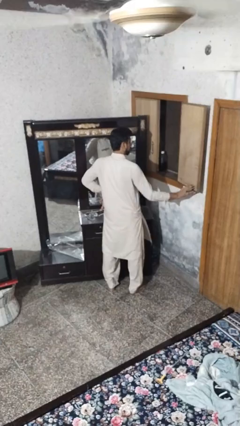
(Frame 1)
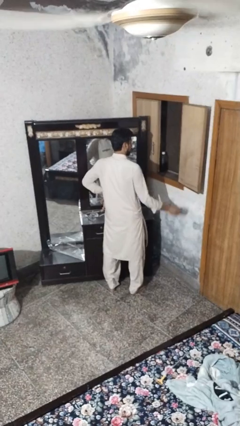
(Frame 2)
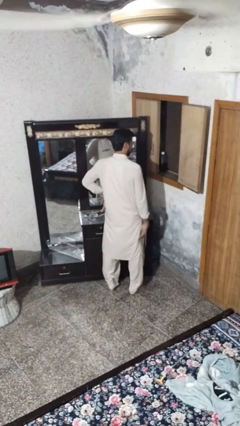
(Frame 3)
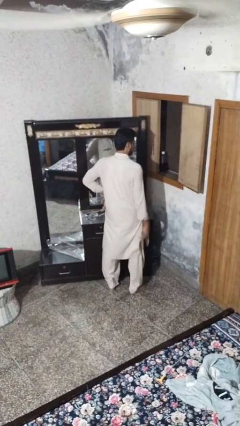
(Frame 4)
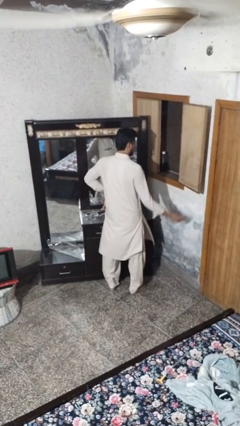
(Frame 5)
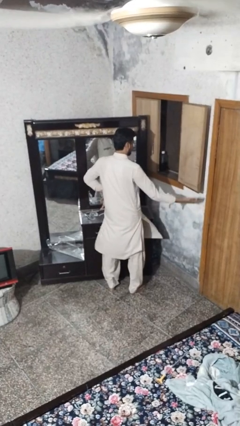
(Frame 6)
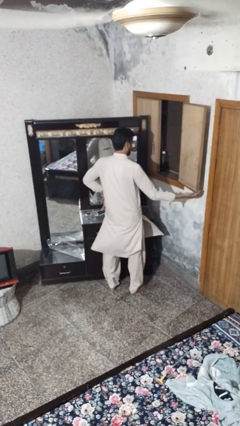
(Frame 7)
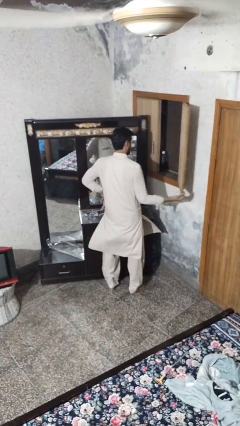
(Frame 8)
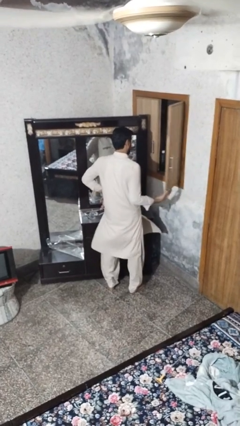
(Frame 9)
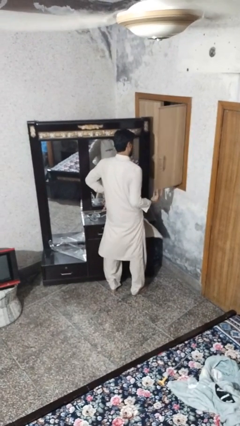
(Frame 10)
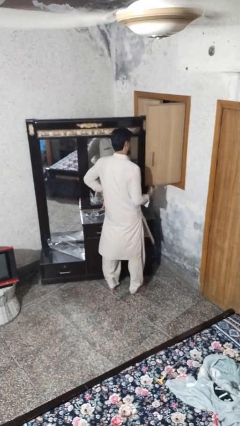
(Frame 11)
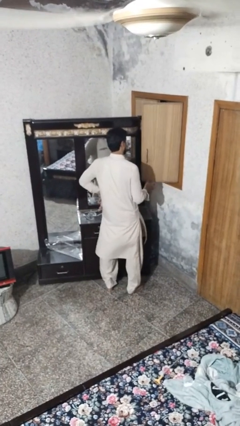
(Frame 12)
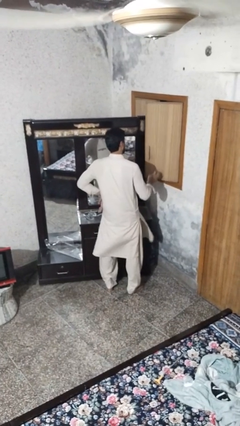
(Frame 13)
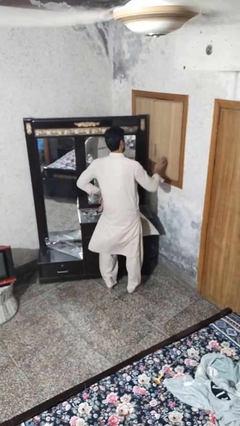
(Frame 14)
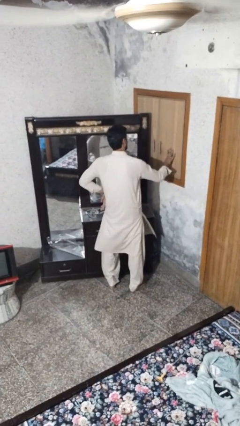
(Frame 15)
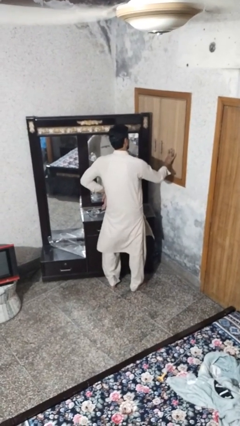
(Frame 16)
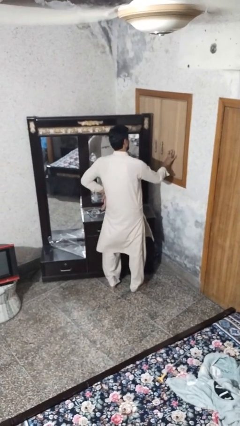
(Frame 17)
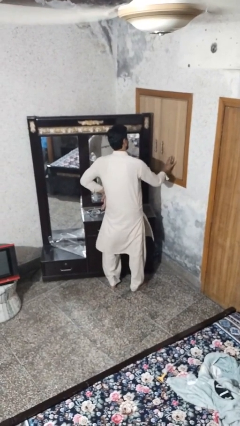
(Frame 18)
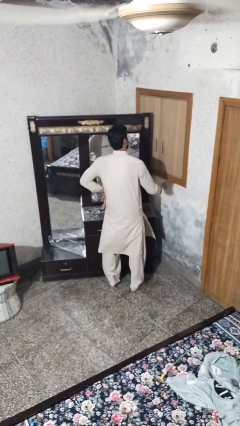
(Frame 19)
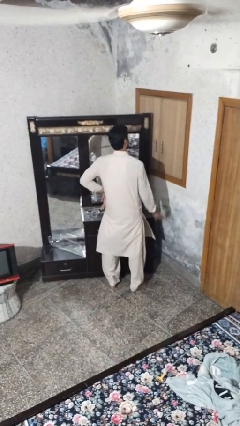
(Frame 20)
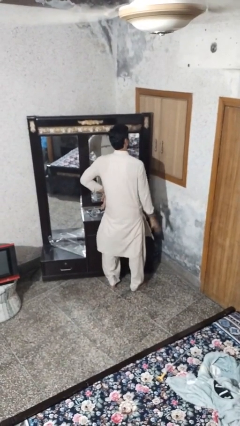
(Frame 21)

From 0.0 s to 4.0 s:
person closes home window

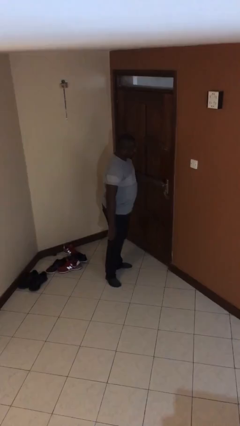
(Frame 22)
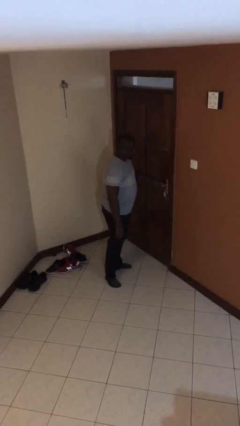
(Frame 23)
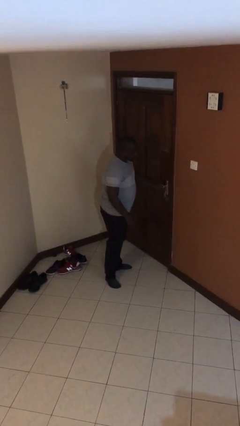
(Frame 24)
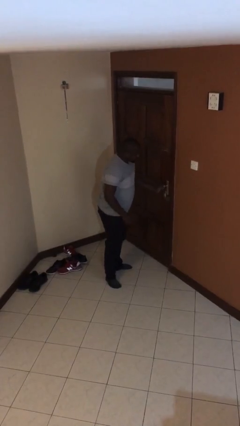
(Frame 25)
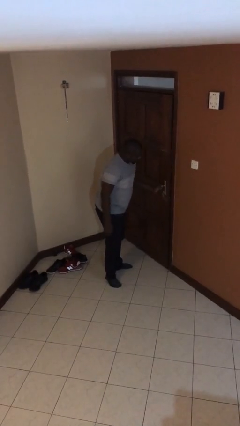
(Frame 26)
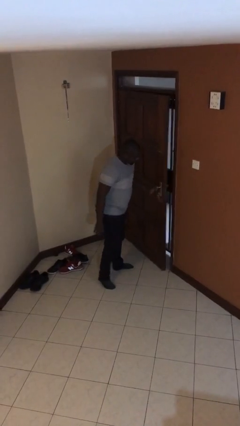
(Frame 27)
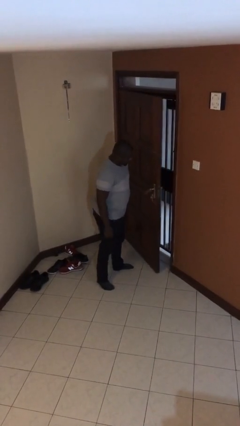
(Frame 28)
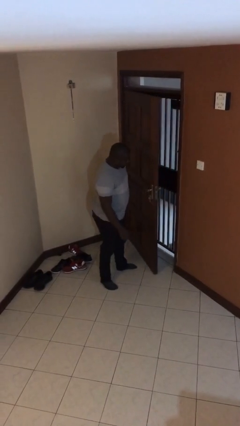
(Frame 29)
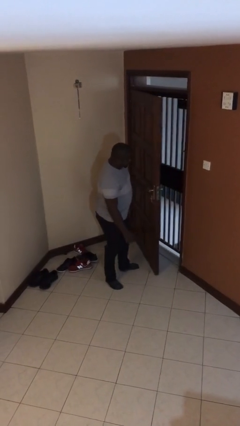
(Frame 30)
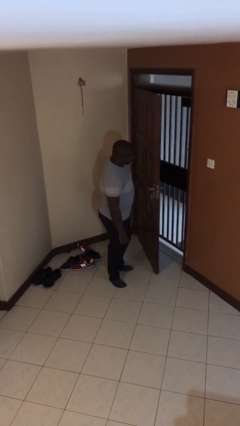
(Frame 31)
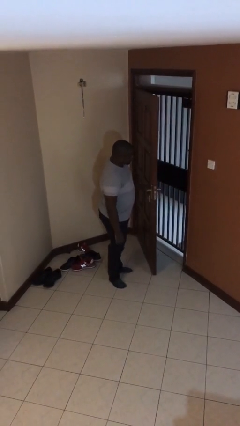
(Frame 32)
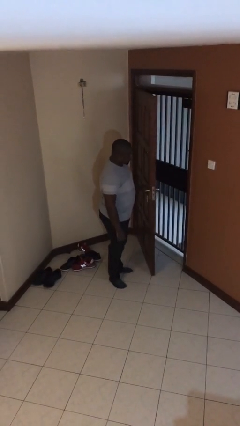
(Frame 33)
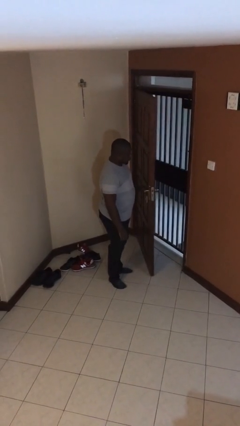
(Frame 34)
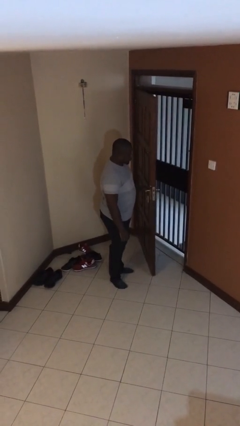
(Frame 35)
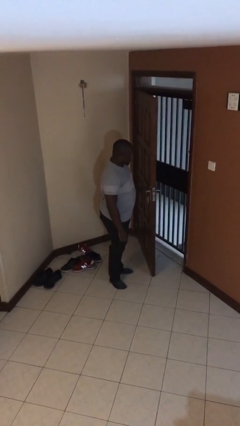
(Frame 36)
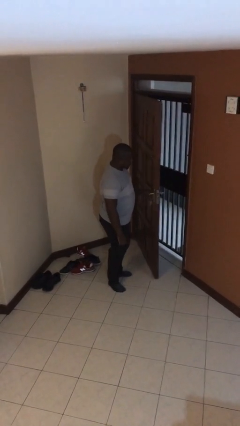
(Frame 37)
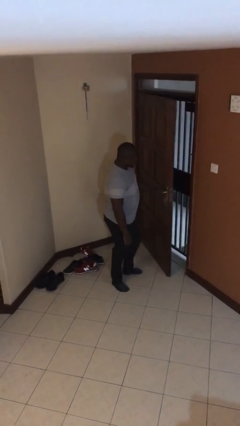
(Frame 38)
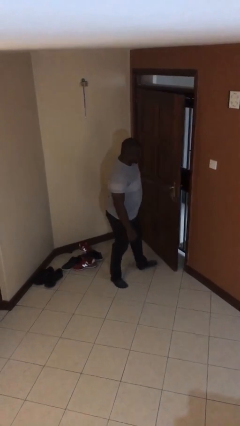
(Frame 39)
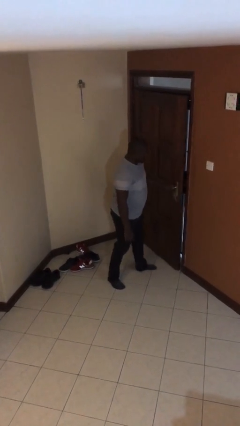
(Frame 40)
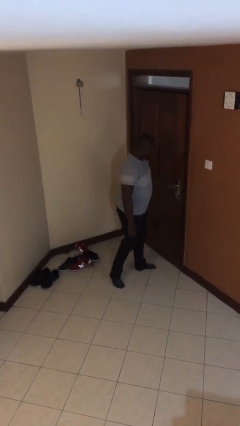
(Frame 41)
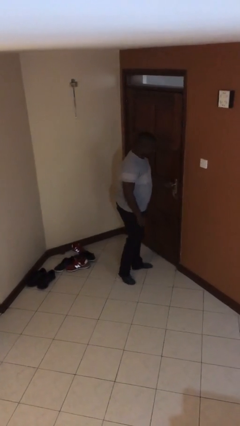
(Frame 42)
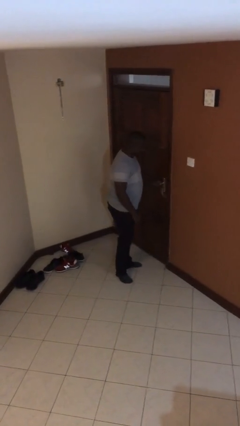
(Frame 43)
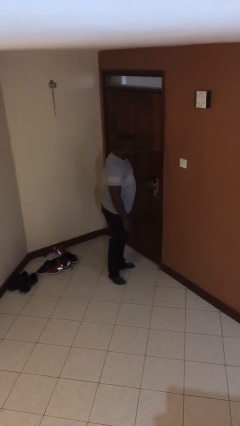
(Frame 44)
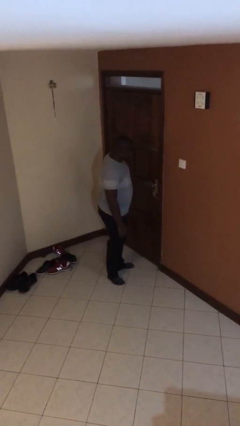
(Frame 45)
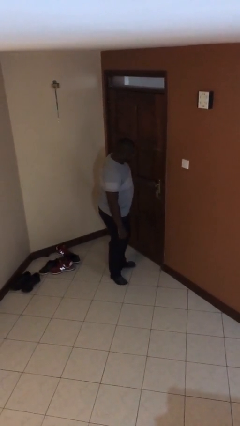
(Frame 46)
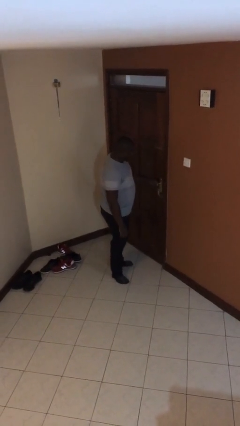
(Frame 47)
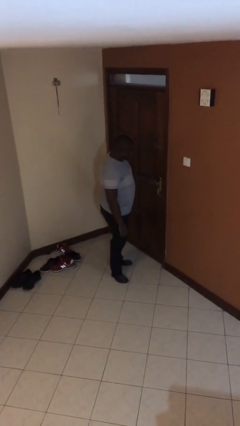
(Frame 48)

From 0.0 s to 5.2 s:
person opens facility door

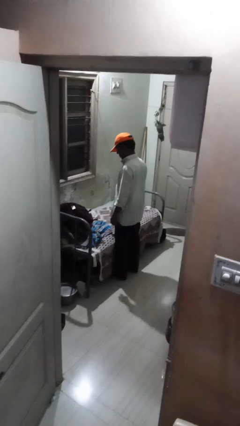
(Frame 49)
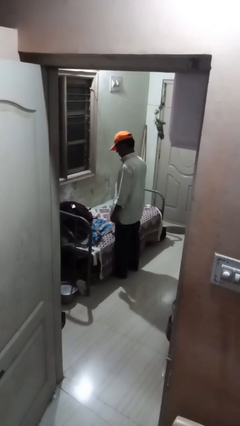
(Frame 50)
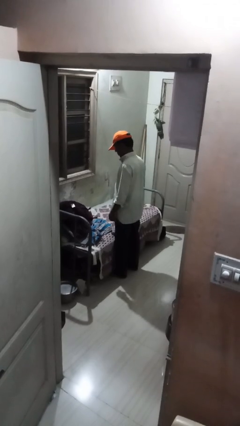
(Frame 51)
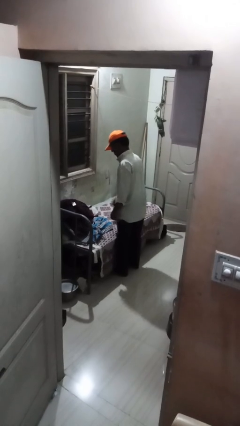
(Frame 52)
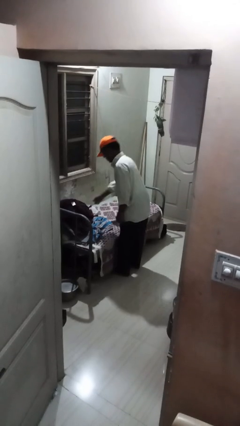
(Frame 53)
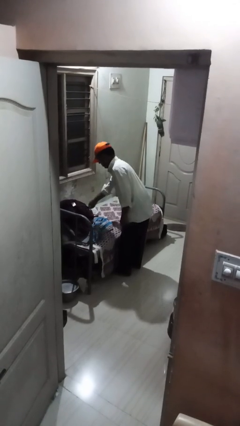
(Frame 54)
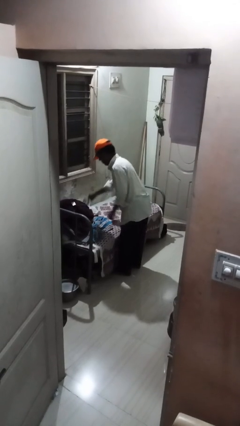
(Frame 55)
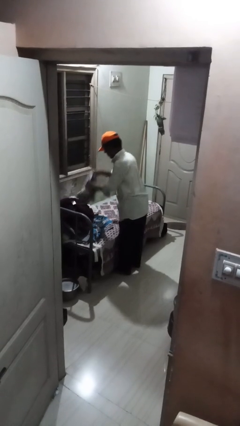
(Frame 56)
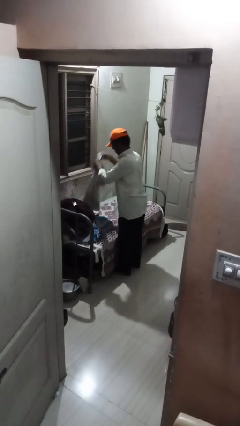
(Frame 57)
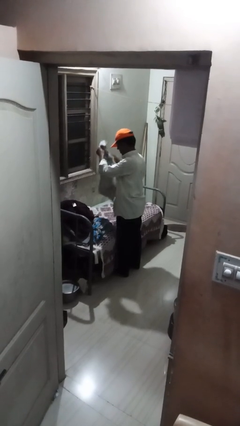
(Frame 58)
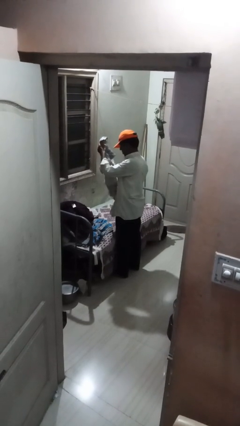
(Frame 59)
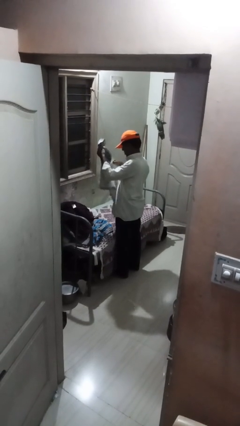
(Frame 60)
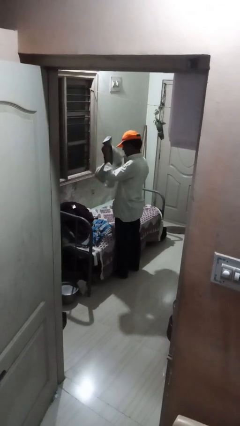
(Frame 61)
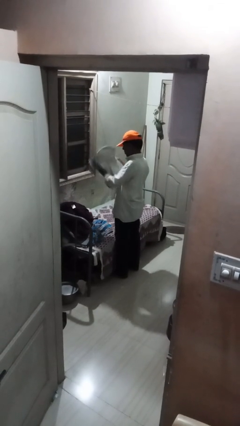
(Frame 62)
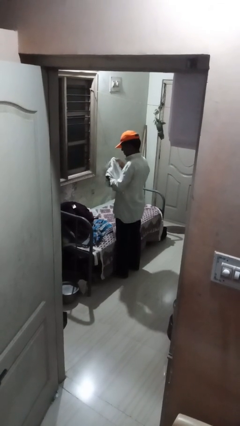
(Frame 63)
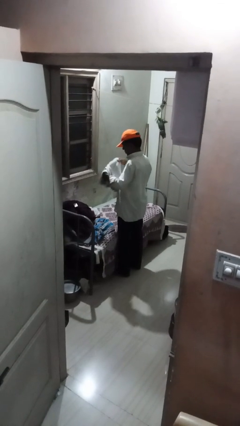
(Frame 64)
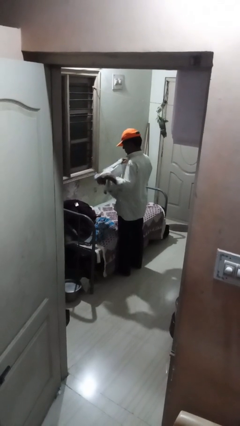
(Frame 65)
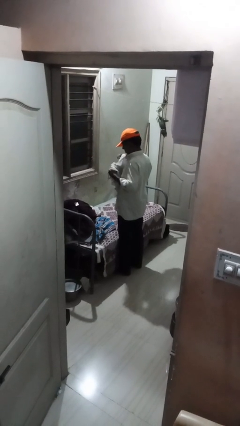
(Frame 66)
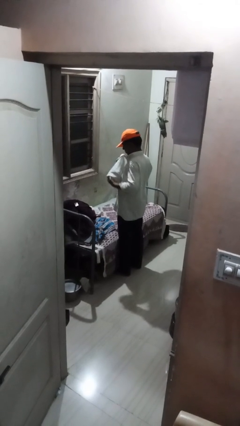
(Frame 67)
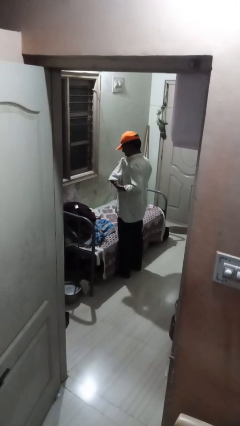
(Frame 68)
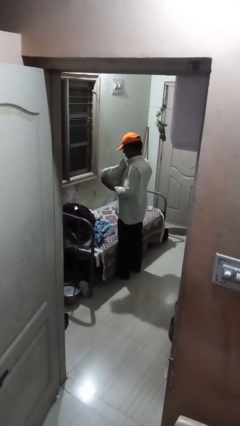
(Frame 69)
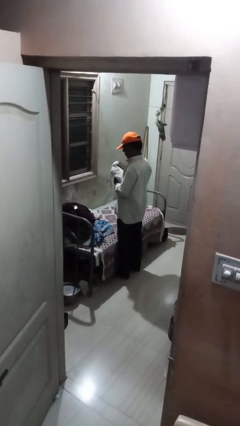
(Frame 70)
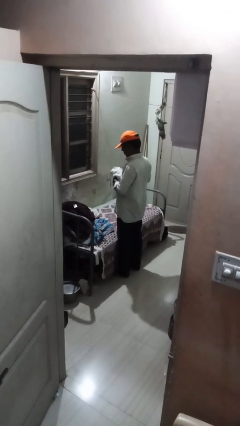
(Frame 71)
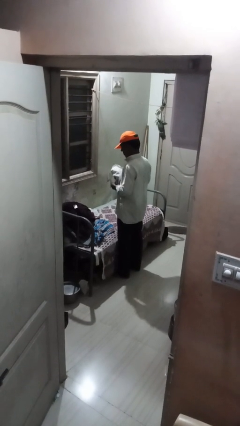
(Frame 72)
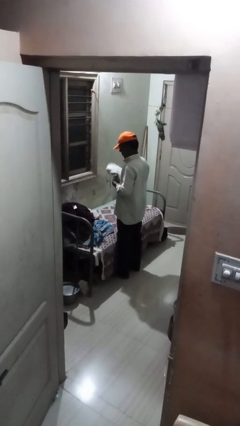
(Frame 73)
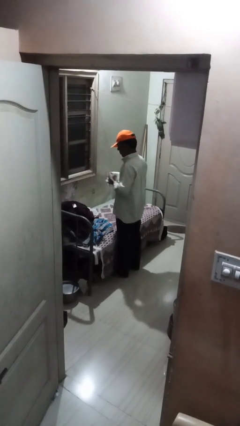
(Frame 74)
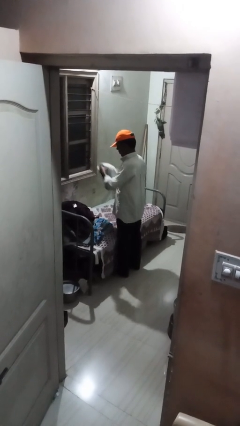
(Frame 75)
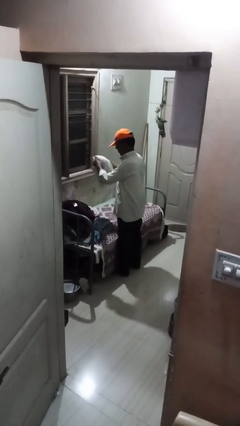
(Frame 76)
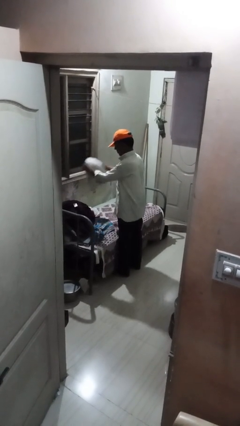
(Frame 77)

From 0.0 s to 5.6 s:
person folds shirt

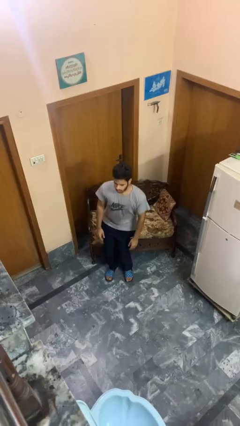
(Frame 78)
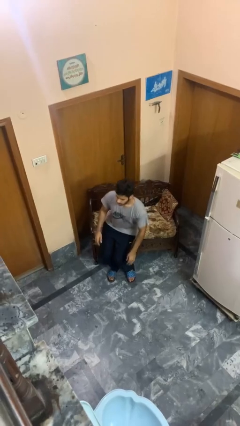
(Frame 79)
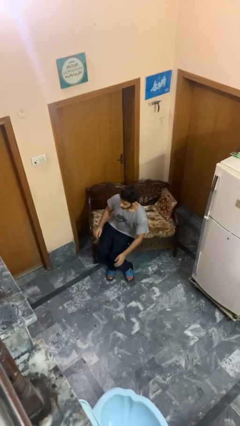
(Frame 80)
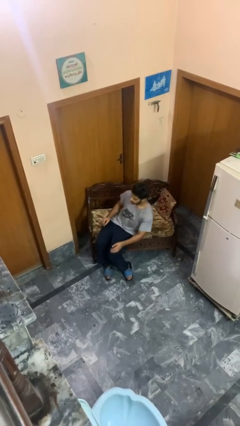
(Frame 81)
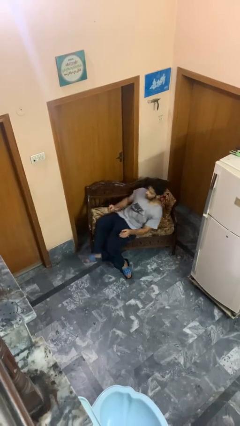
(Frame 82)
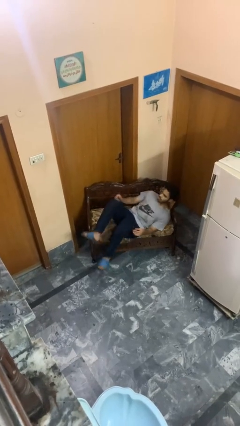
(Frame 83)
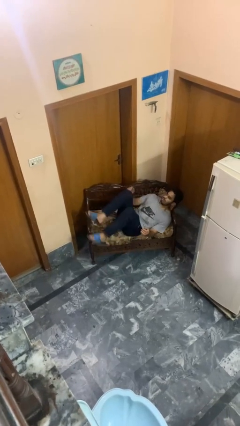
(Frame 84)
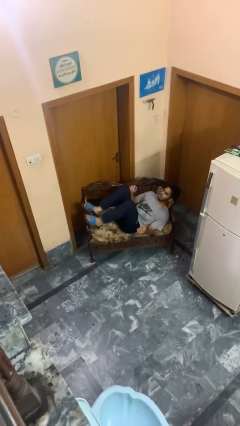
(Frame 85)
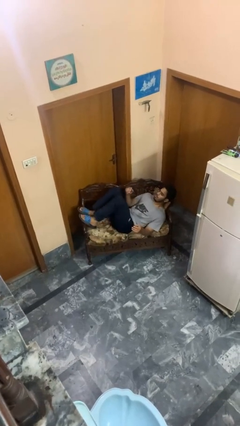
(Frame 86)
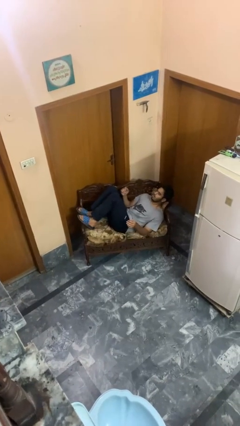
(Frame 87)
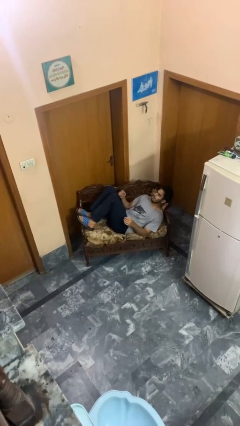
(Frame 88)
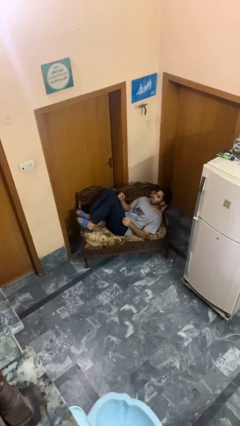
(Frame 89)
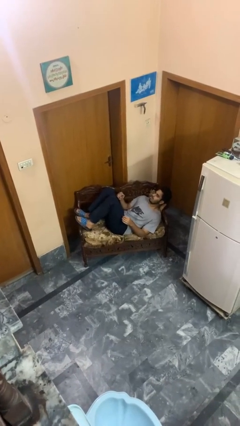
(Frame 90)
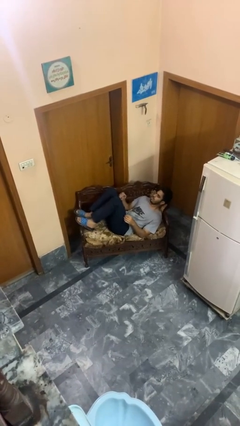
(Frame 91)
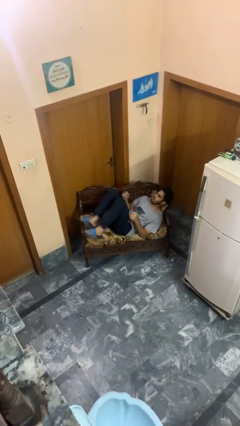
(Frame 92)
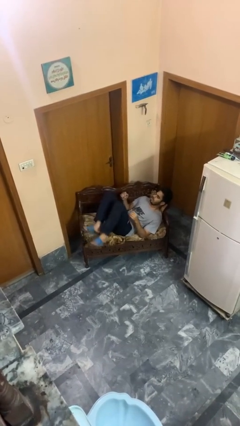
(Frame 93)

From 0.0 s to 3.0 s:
person lies down on couch
